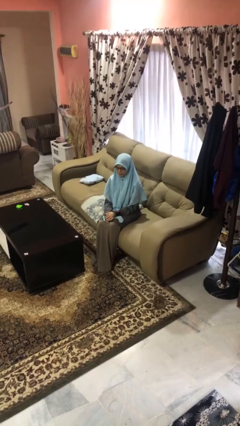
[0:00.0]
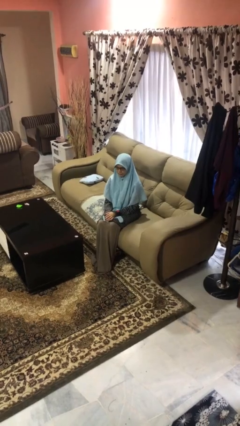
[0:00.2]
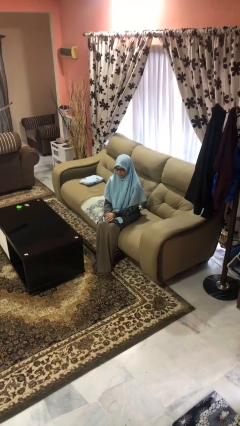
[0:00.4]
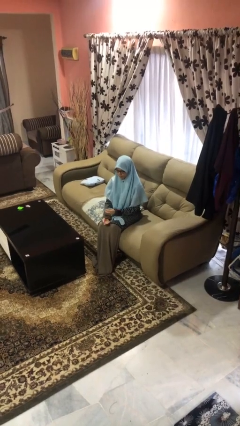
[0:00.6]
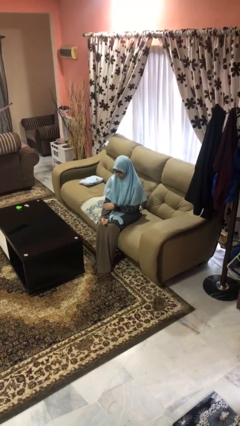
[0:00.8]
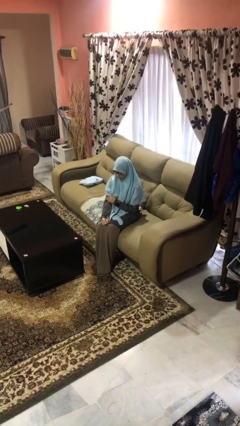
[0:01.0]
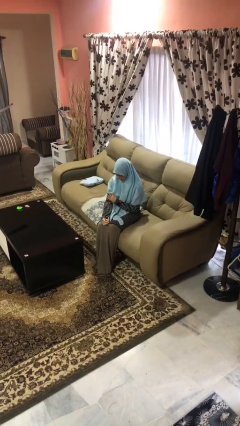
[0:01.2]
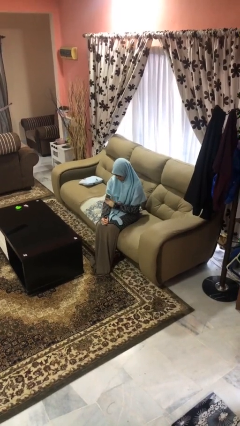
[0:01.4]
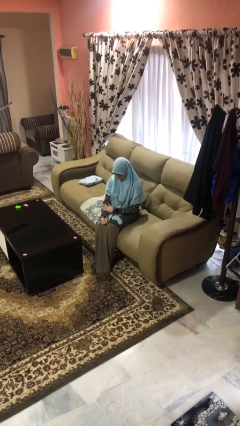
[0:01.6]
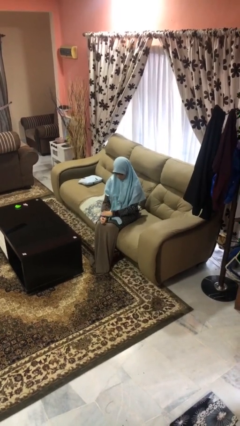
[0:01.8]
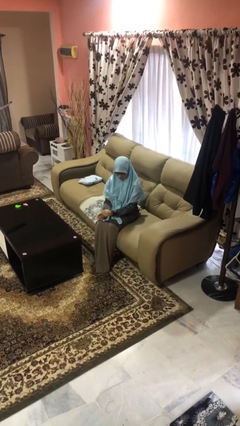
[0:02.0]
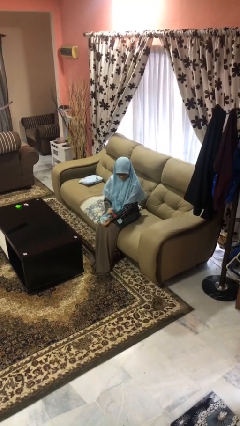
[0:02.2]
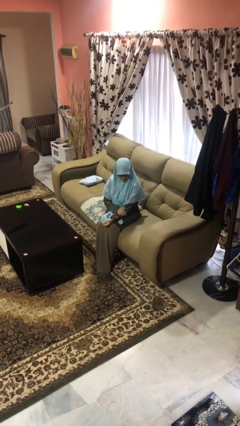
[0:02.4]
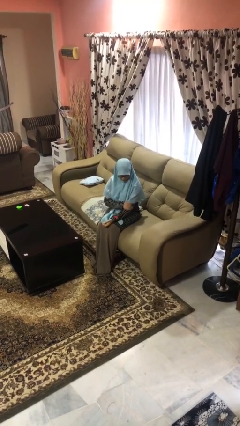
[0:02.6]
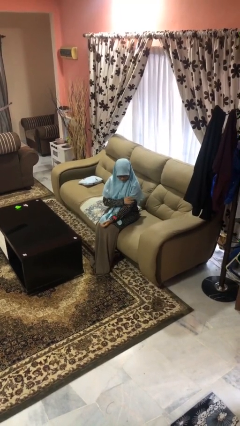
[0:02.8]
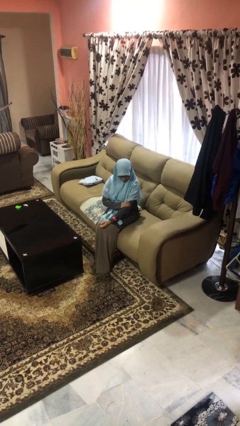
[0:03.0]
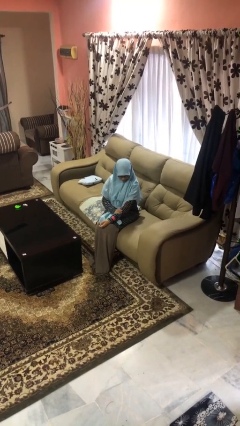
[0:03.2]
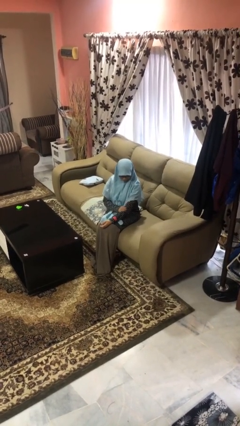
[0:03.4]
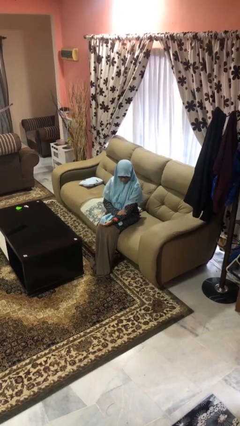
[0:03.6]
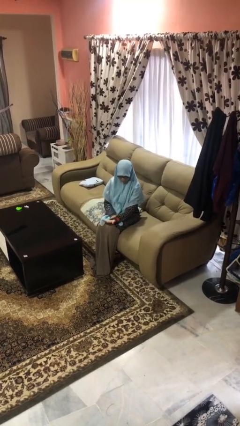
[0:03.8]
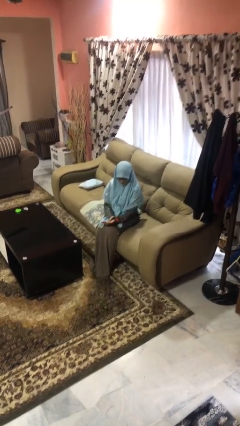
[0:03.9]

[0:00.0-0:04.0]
person looks at hands in lap

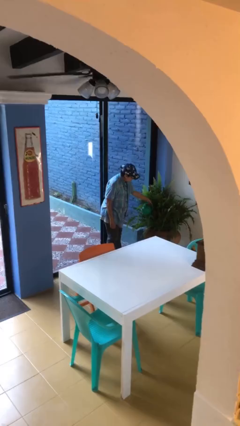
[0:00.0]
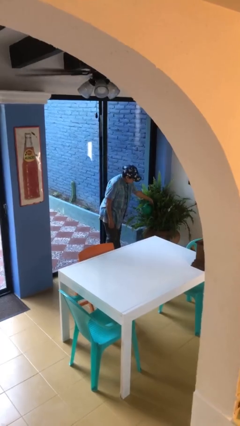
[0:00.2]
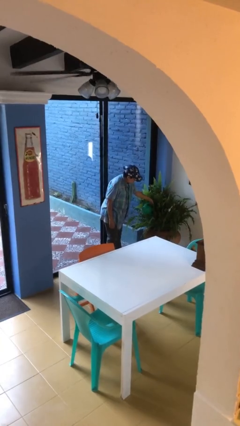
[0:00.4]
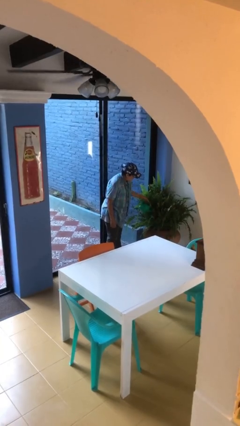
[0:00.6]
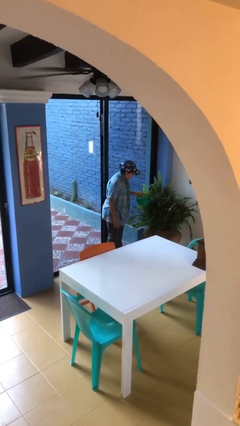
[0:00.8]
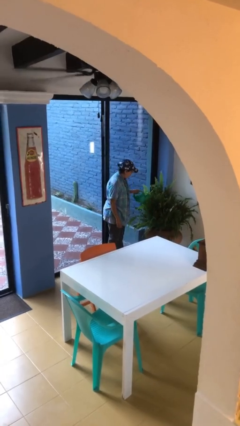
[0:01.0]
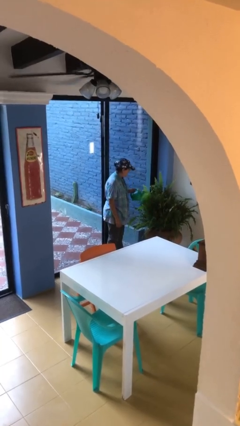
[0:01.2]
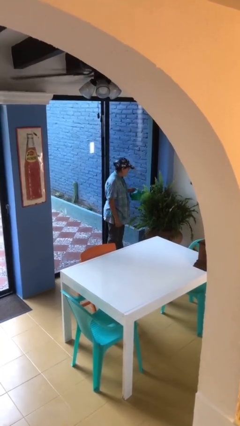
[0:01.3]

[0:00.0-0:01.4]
person waters houseplant

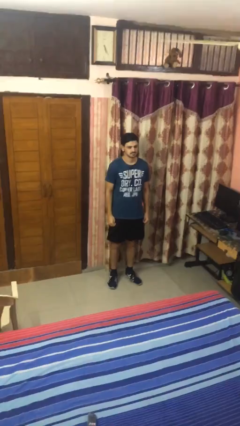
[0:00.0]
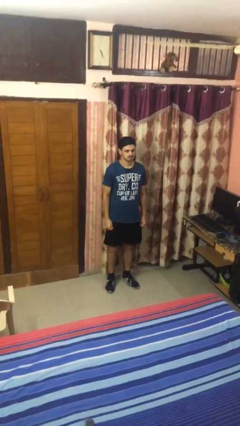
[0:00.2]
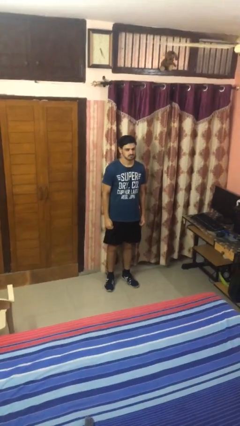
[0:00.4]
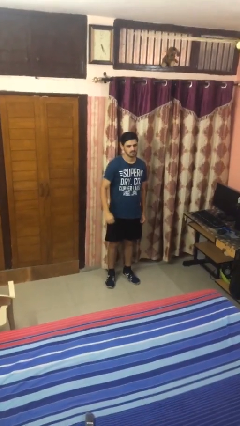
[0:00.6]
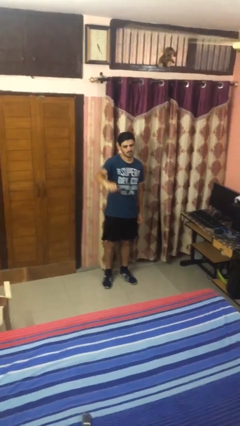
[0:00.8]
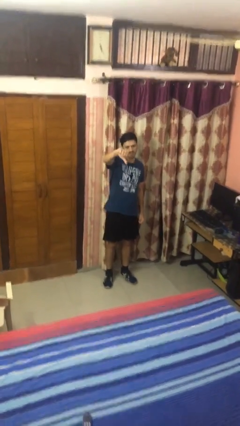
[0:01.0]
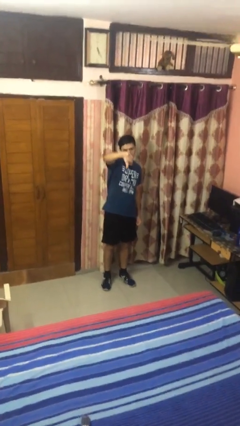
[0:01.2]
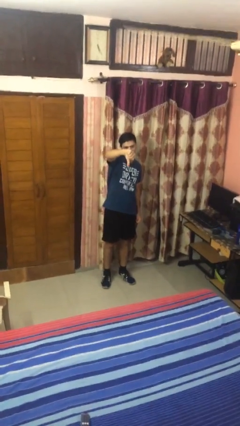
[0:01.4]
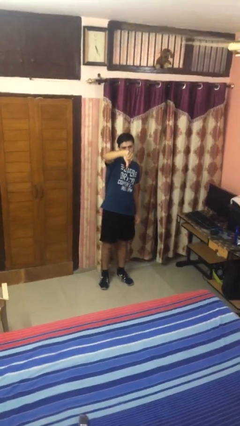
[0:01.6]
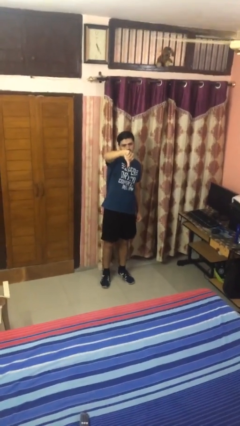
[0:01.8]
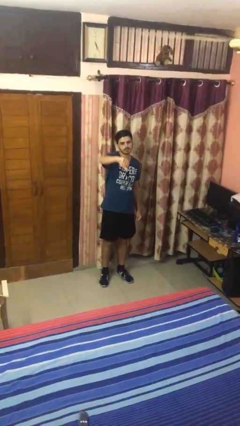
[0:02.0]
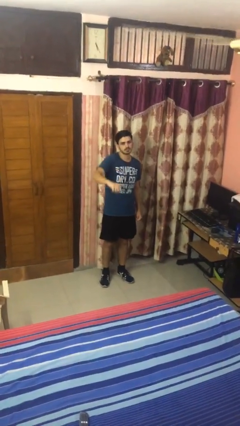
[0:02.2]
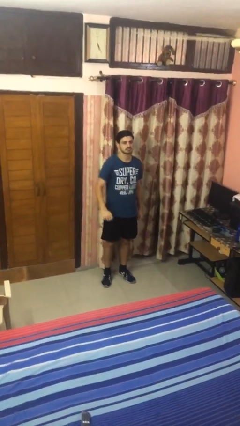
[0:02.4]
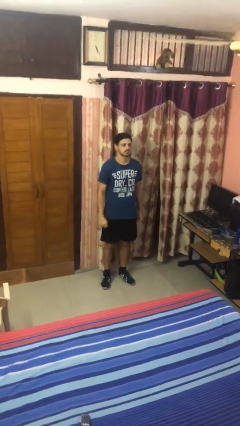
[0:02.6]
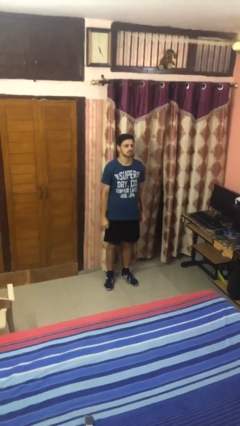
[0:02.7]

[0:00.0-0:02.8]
person gestures thumbs down

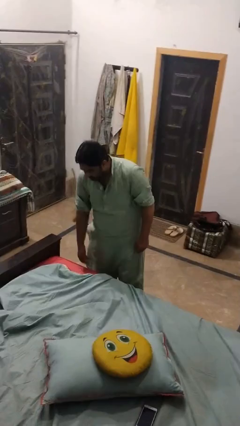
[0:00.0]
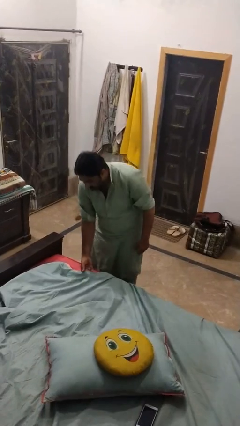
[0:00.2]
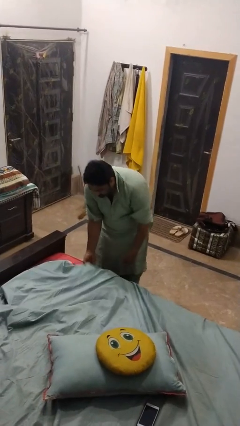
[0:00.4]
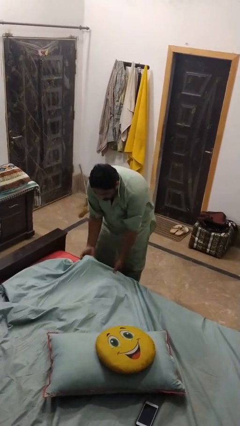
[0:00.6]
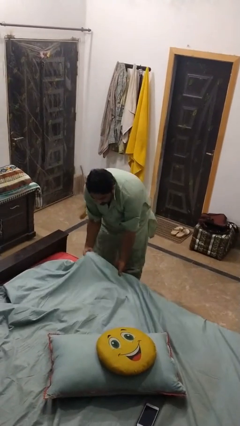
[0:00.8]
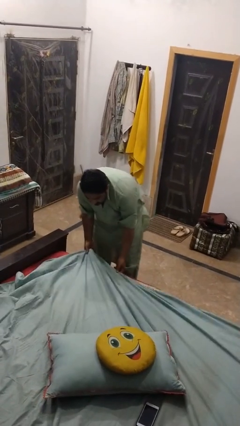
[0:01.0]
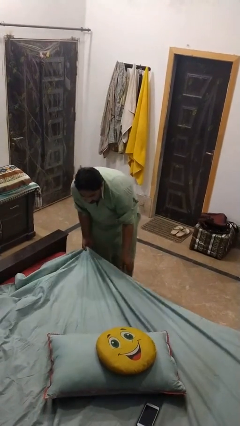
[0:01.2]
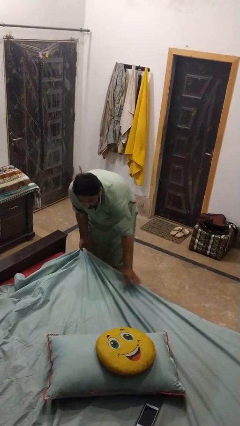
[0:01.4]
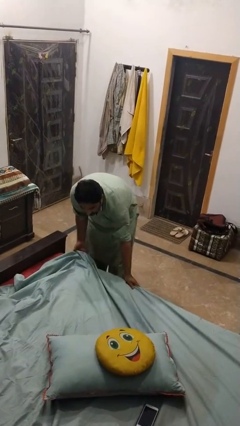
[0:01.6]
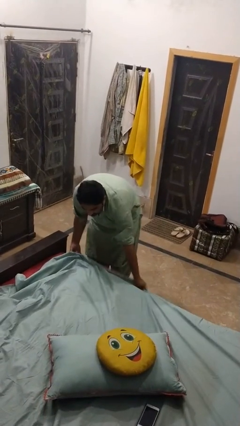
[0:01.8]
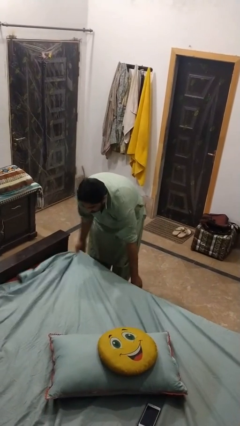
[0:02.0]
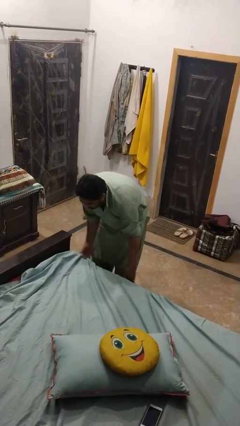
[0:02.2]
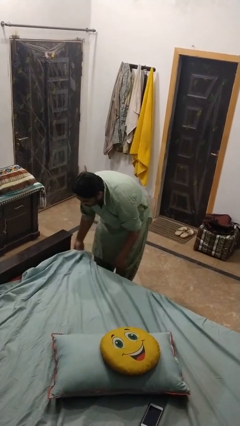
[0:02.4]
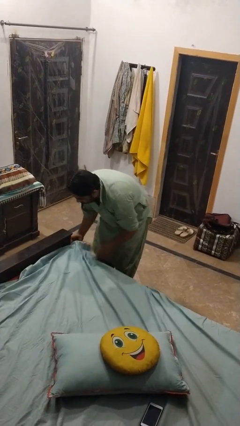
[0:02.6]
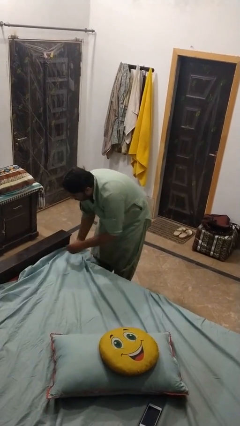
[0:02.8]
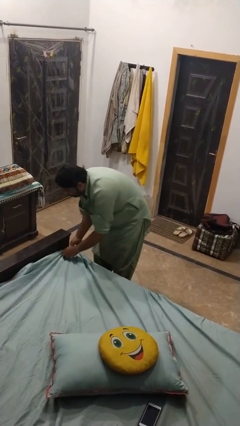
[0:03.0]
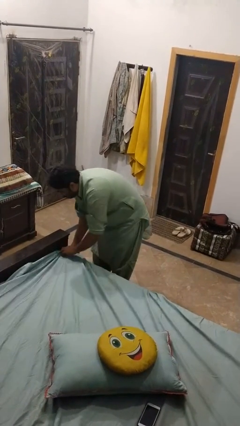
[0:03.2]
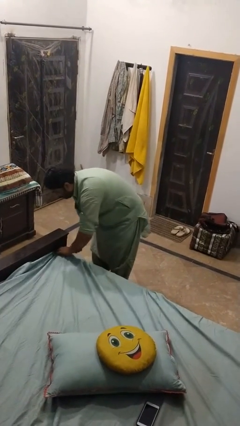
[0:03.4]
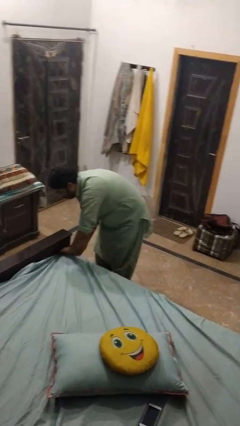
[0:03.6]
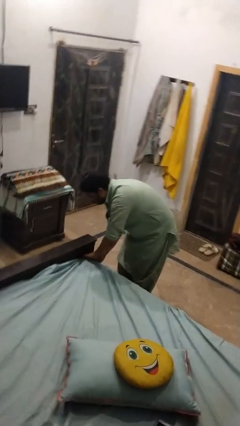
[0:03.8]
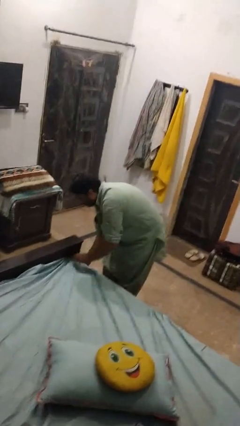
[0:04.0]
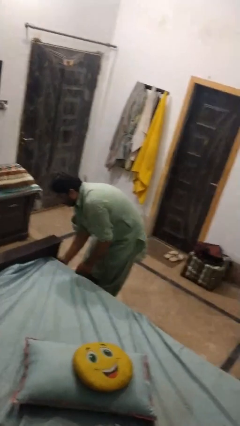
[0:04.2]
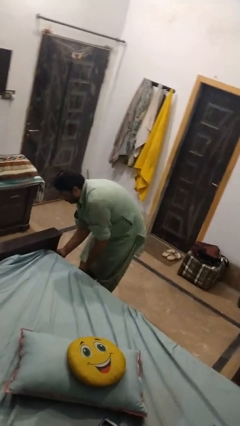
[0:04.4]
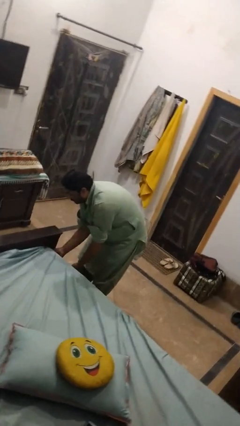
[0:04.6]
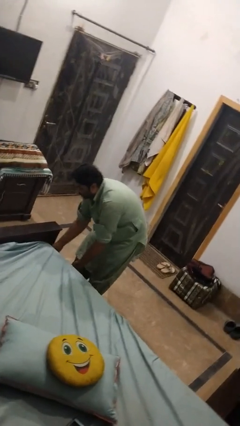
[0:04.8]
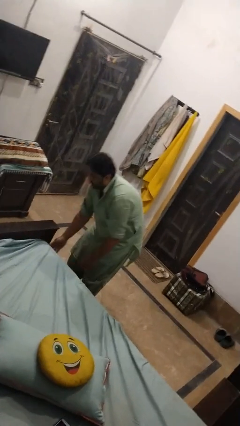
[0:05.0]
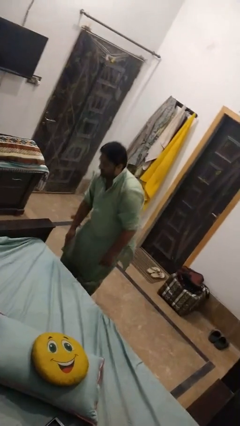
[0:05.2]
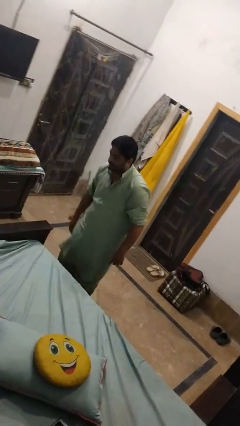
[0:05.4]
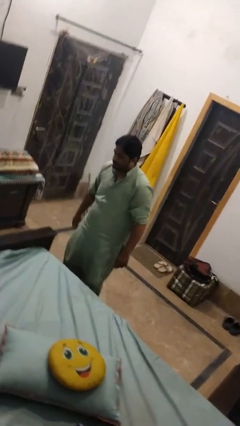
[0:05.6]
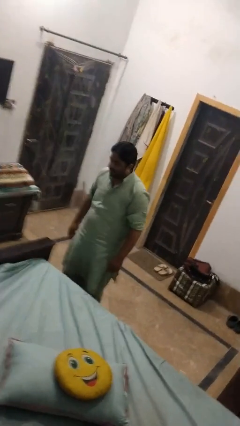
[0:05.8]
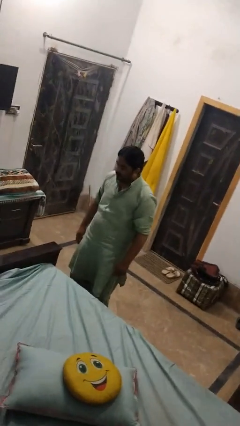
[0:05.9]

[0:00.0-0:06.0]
person makes bed

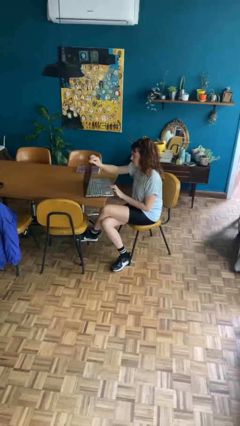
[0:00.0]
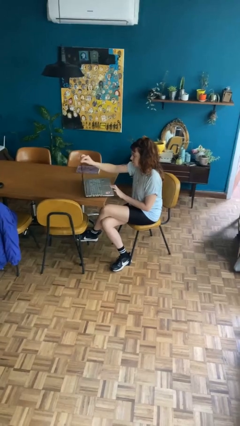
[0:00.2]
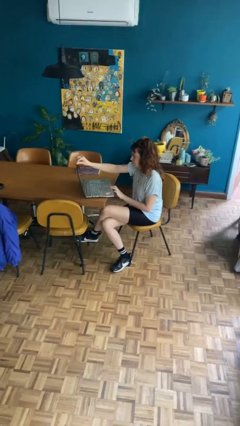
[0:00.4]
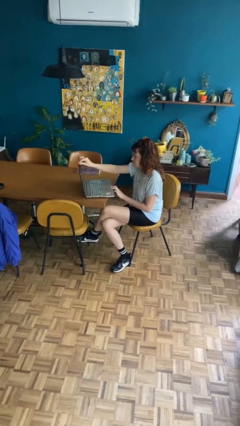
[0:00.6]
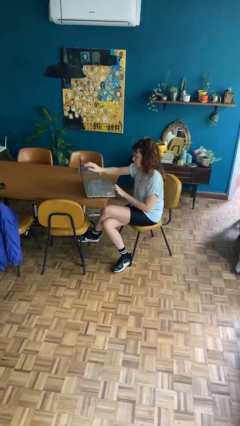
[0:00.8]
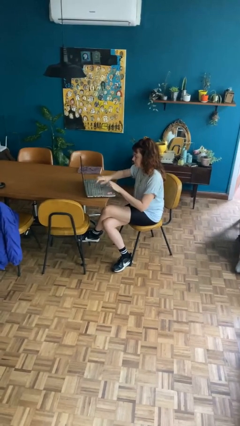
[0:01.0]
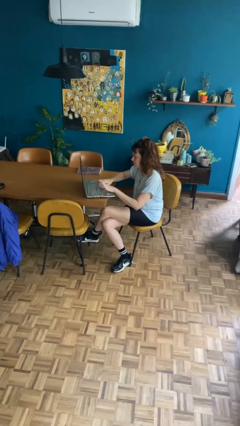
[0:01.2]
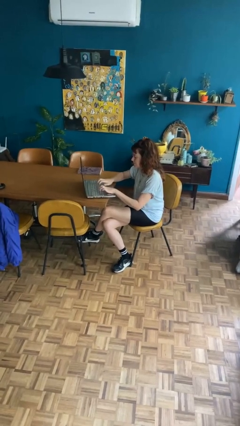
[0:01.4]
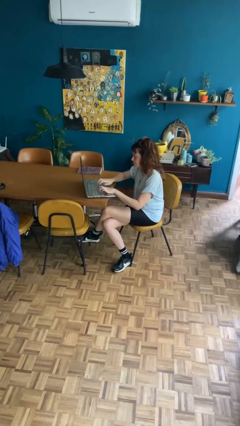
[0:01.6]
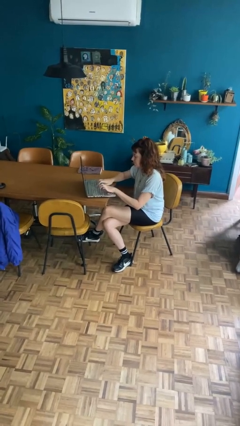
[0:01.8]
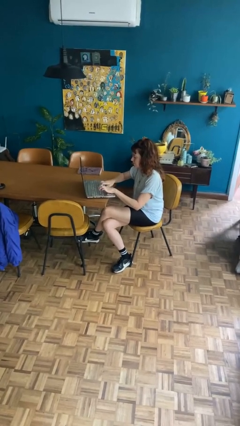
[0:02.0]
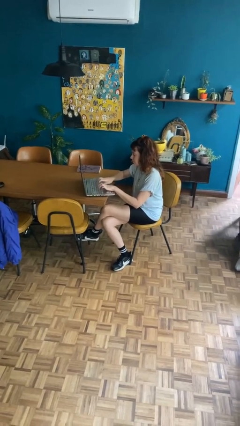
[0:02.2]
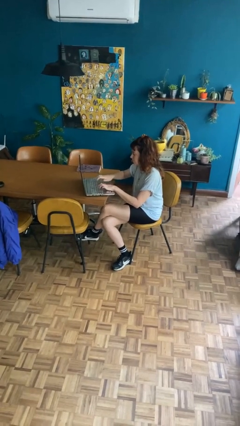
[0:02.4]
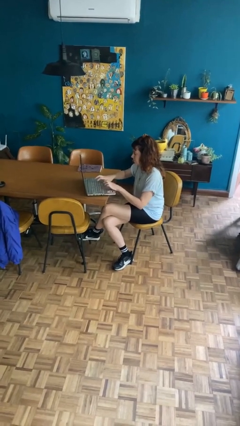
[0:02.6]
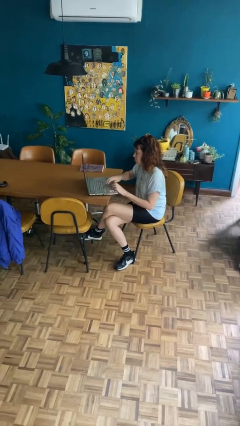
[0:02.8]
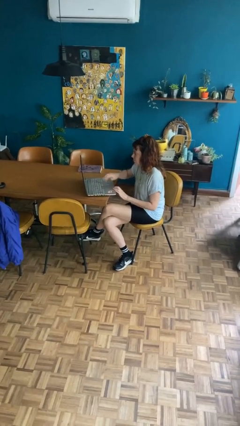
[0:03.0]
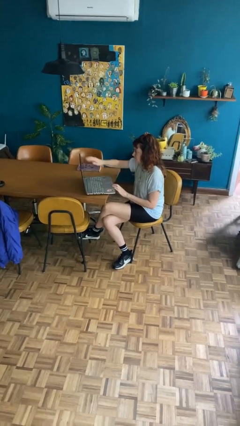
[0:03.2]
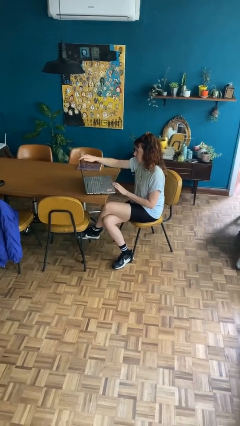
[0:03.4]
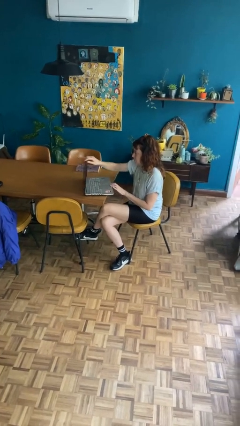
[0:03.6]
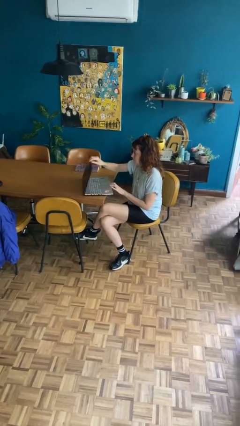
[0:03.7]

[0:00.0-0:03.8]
person interacts with laptop
